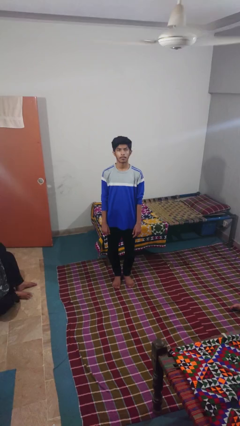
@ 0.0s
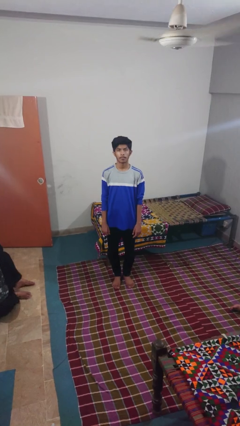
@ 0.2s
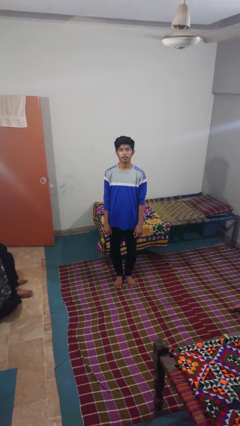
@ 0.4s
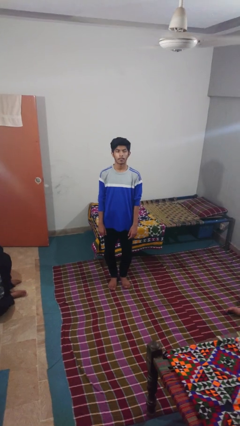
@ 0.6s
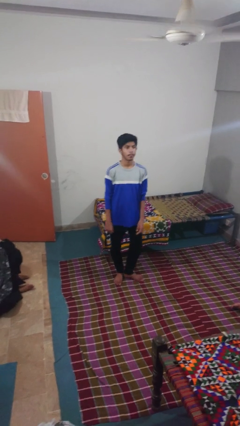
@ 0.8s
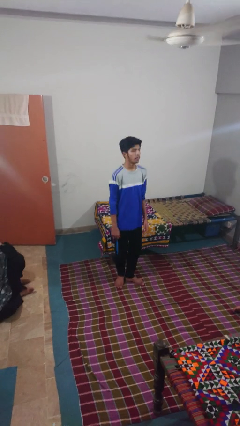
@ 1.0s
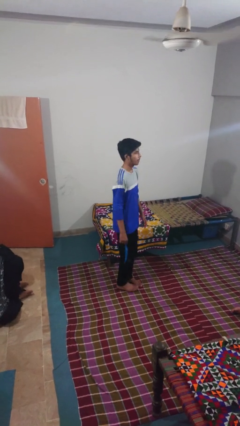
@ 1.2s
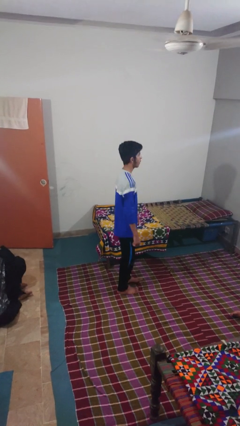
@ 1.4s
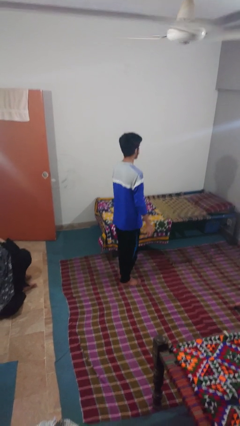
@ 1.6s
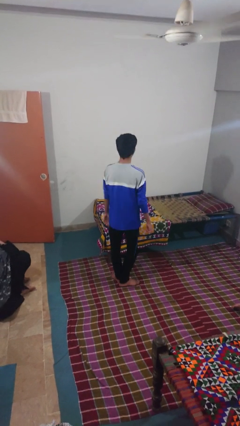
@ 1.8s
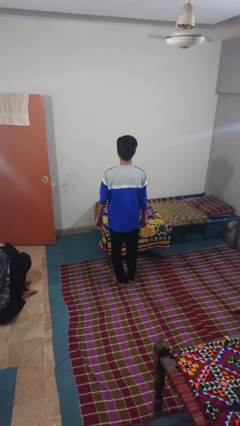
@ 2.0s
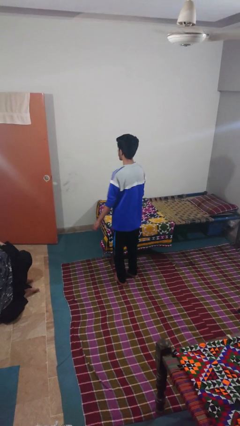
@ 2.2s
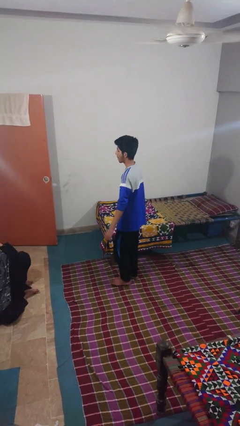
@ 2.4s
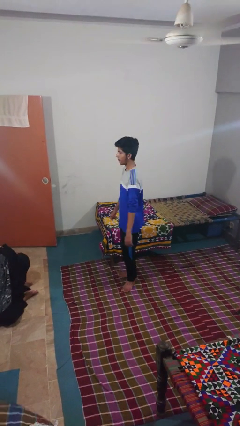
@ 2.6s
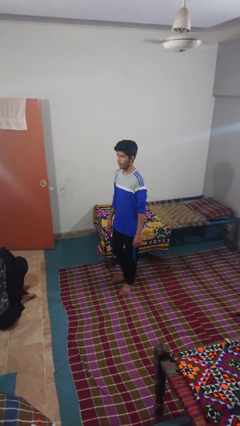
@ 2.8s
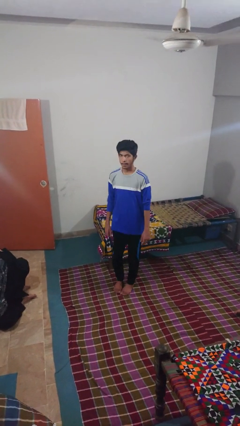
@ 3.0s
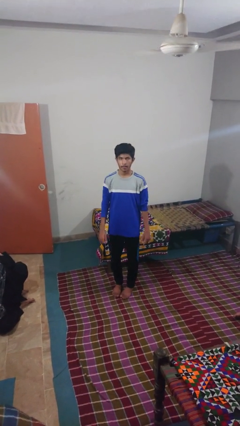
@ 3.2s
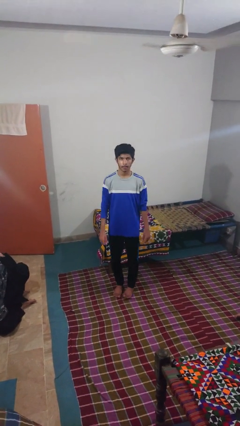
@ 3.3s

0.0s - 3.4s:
person twirls

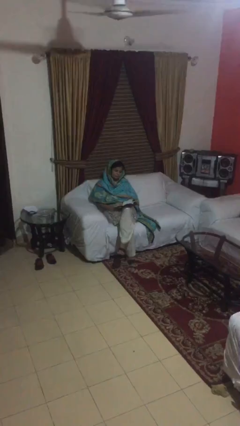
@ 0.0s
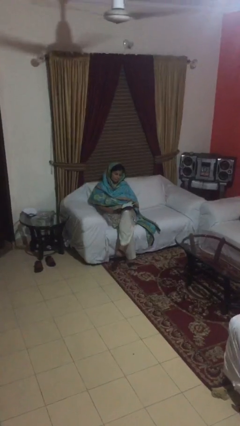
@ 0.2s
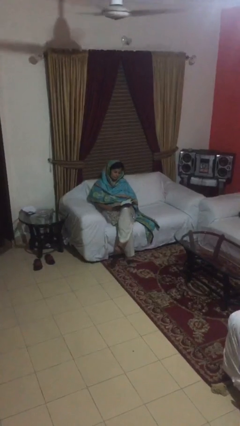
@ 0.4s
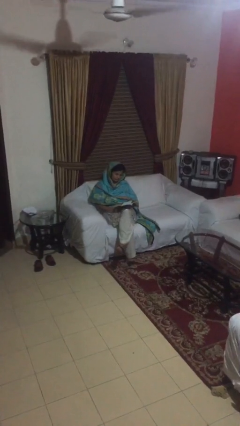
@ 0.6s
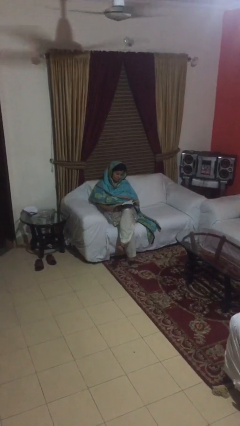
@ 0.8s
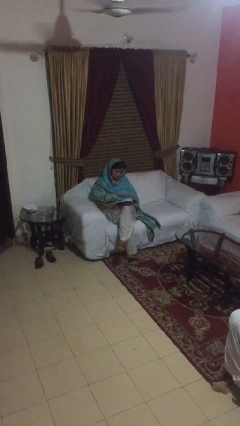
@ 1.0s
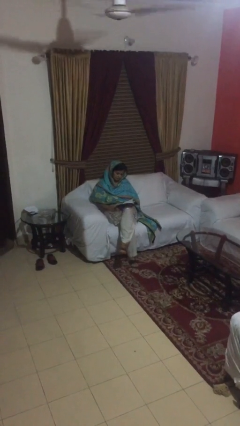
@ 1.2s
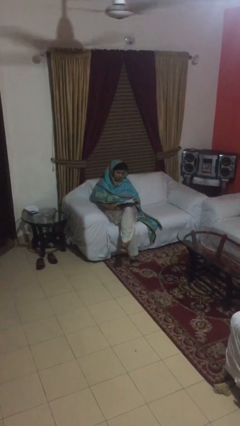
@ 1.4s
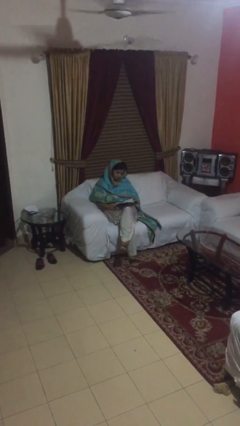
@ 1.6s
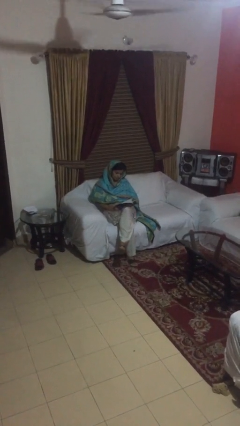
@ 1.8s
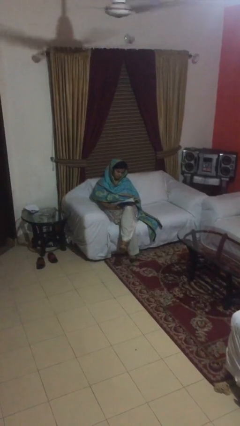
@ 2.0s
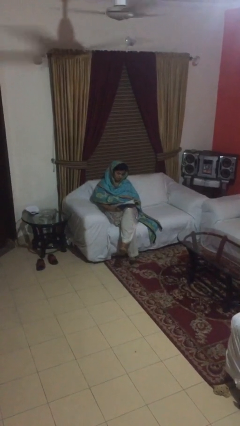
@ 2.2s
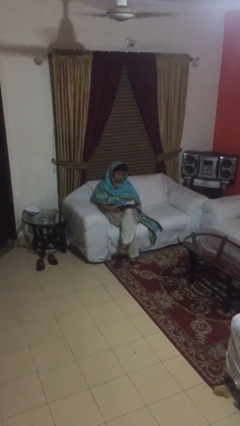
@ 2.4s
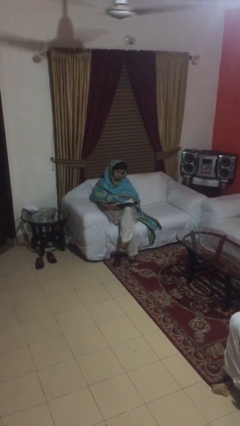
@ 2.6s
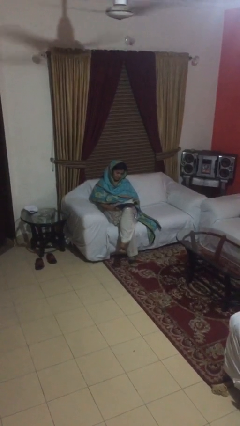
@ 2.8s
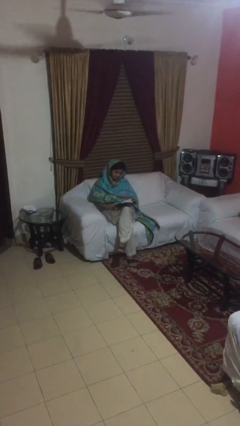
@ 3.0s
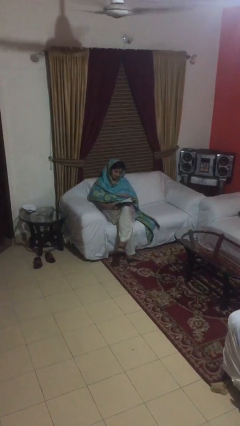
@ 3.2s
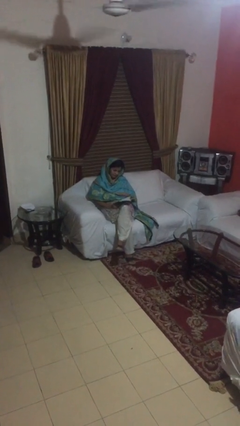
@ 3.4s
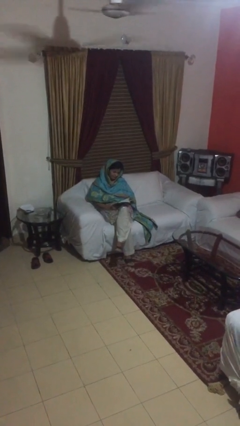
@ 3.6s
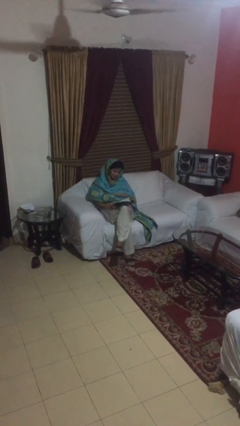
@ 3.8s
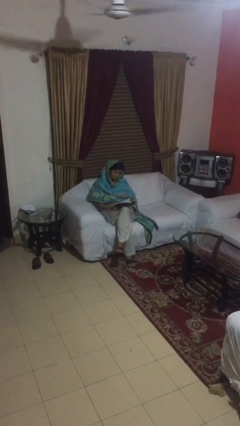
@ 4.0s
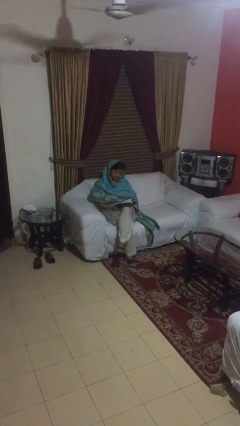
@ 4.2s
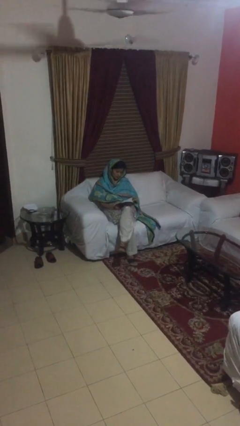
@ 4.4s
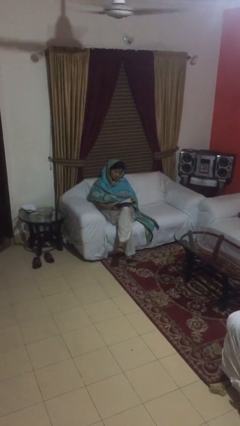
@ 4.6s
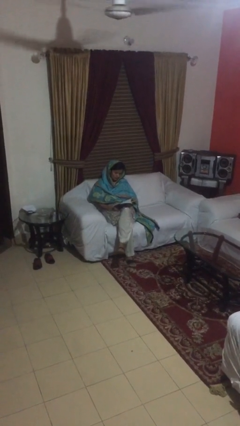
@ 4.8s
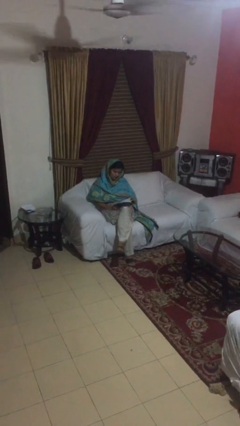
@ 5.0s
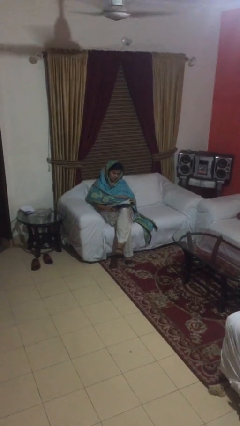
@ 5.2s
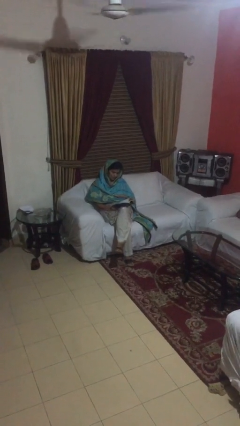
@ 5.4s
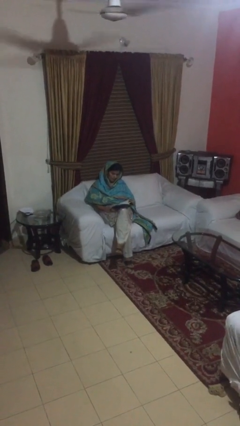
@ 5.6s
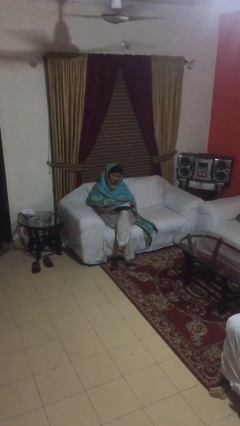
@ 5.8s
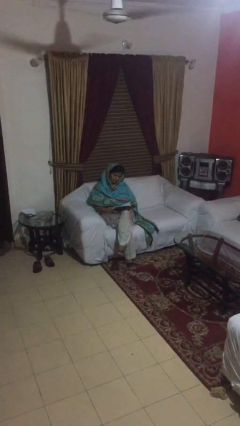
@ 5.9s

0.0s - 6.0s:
person reads document

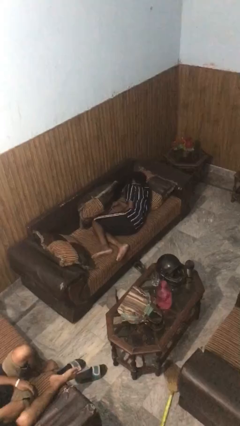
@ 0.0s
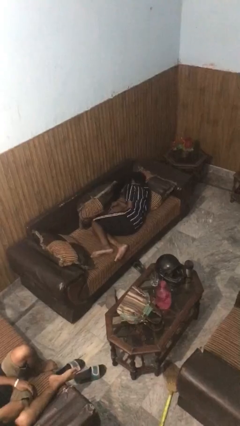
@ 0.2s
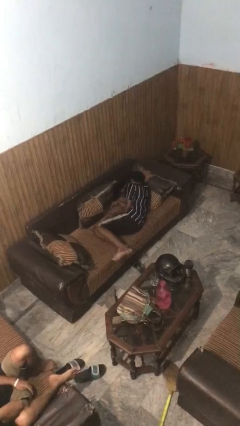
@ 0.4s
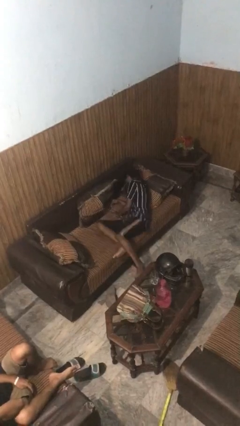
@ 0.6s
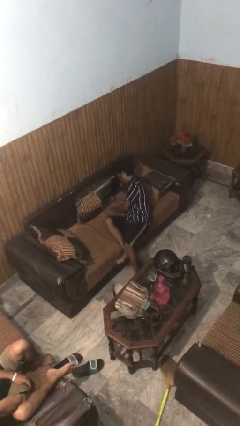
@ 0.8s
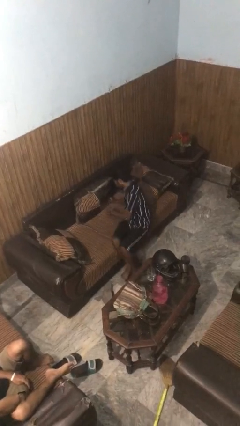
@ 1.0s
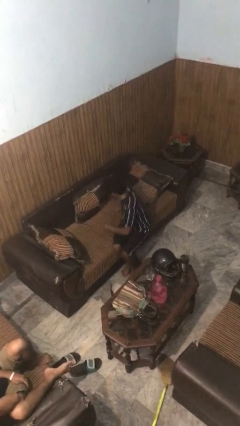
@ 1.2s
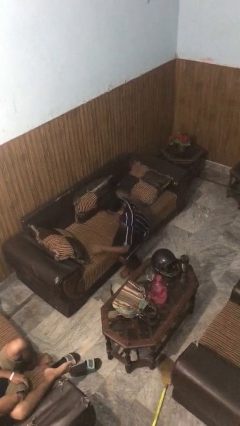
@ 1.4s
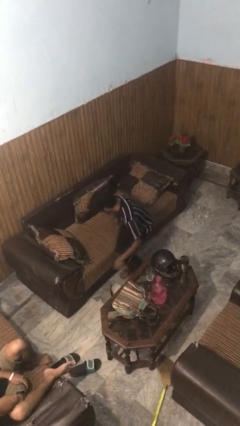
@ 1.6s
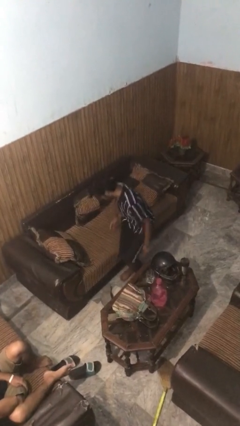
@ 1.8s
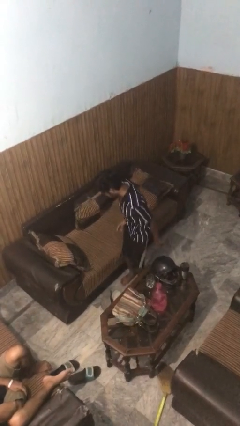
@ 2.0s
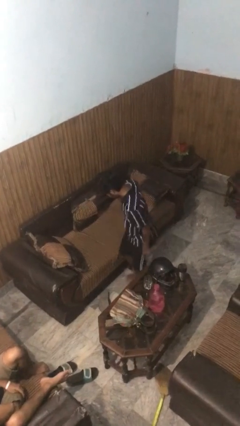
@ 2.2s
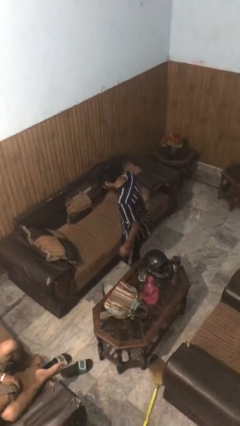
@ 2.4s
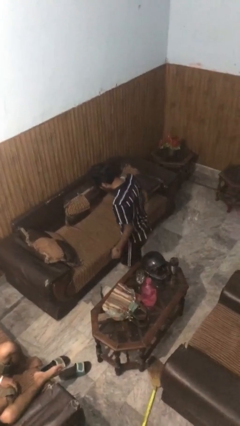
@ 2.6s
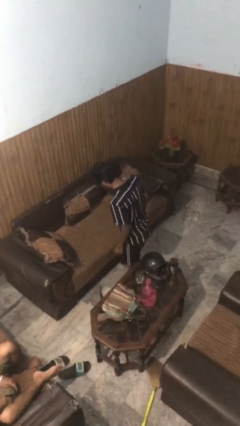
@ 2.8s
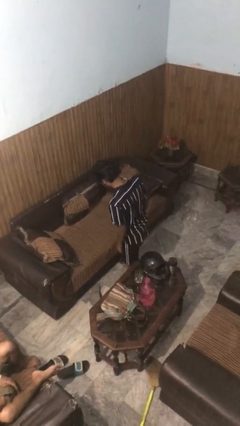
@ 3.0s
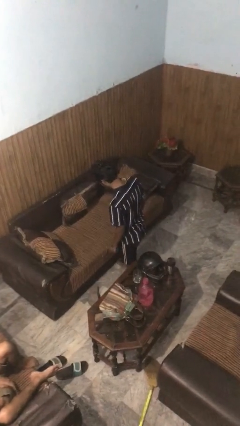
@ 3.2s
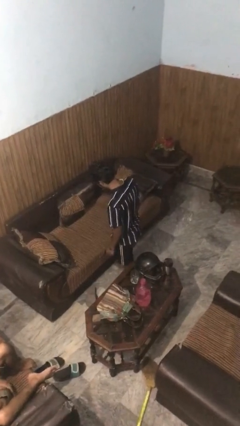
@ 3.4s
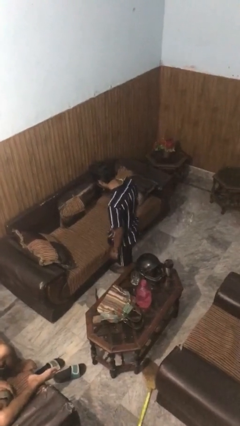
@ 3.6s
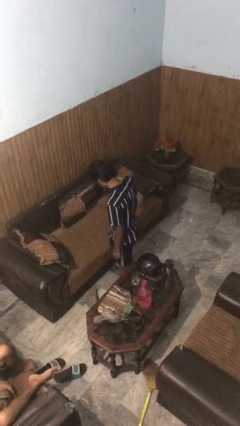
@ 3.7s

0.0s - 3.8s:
person stands up

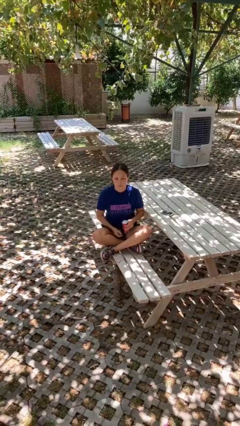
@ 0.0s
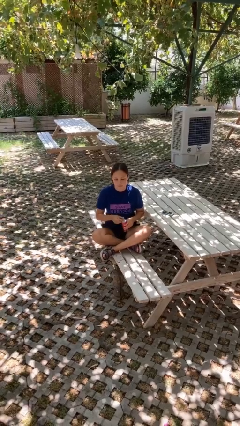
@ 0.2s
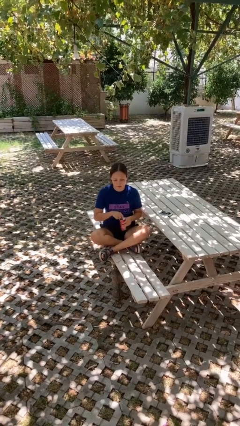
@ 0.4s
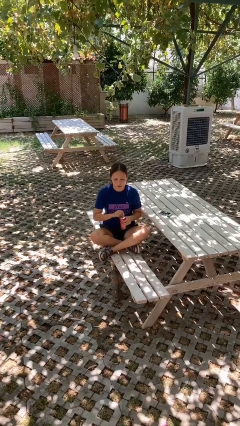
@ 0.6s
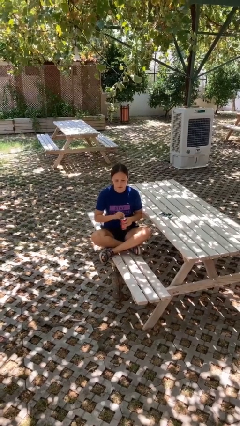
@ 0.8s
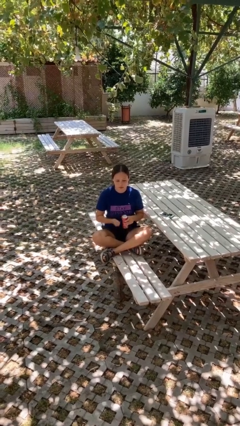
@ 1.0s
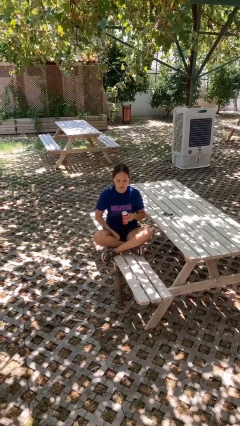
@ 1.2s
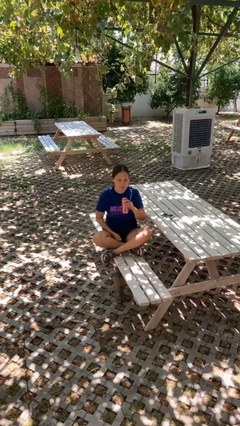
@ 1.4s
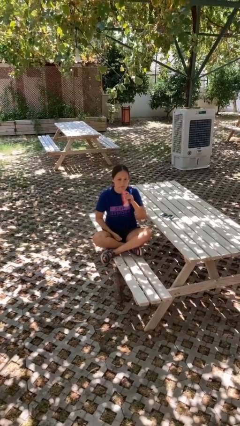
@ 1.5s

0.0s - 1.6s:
person opens beverage can

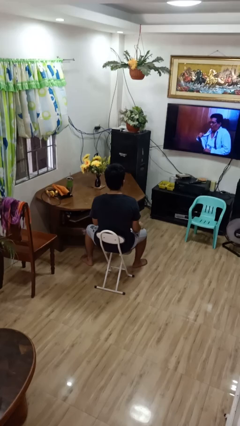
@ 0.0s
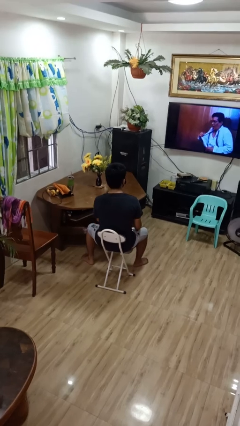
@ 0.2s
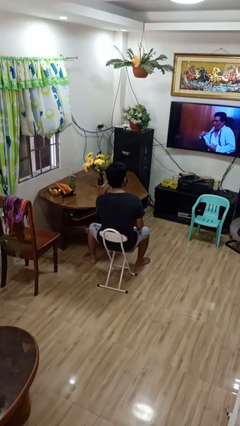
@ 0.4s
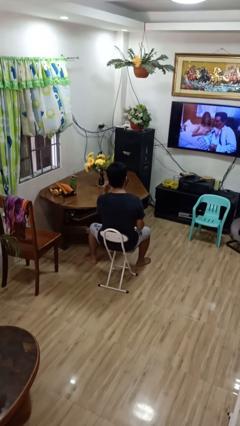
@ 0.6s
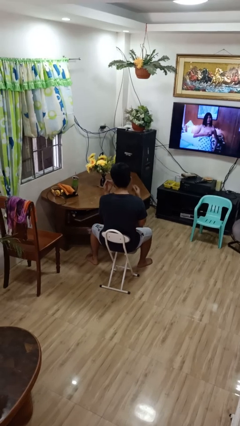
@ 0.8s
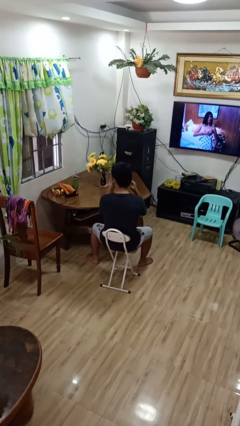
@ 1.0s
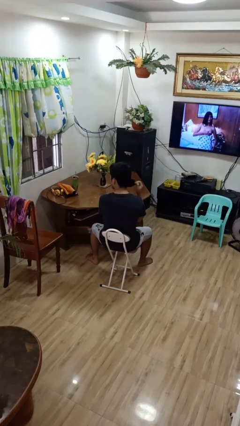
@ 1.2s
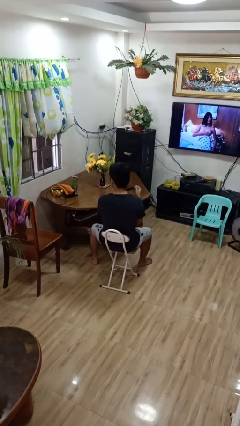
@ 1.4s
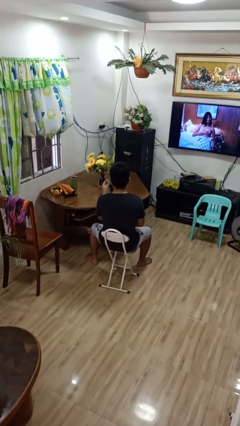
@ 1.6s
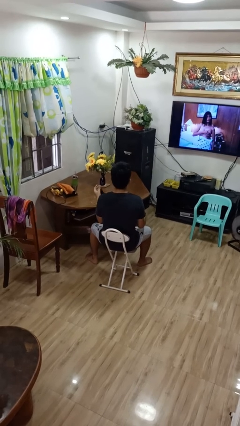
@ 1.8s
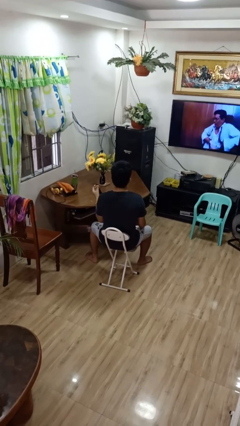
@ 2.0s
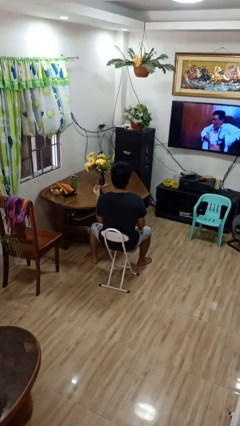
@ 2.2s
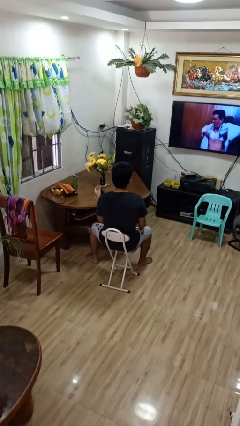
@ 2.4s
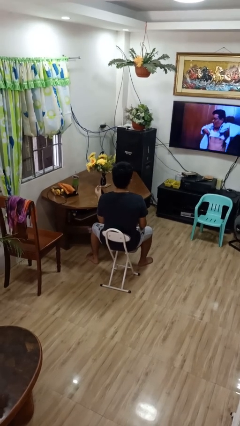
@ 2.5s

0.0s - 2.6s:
person takes off facemask

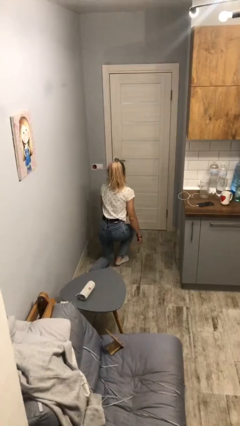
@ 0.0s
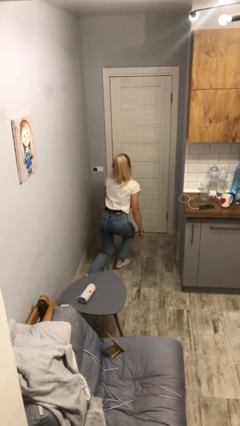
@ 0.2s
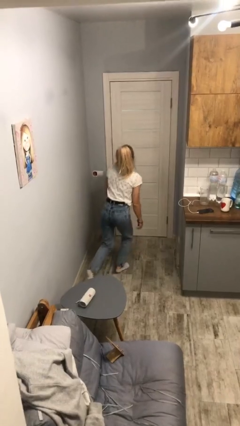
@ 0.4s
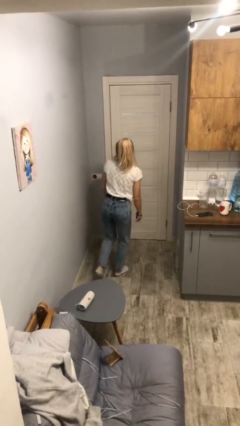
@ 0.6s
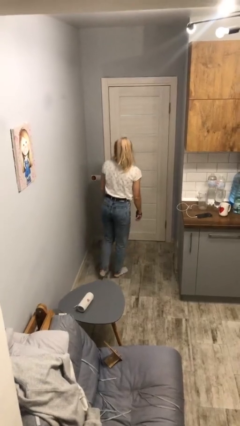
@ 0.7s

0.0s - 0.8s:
person stands up from floor
